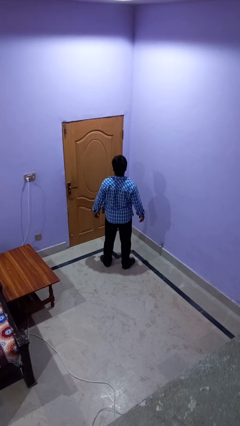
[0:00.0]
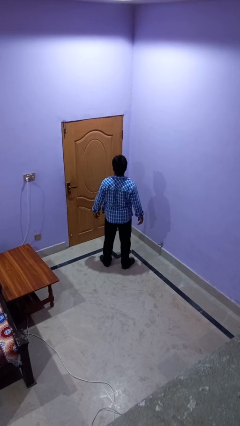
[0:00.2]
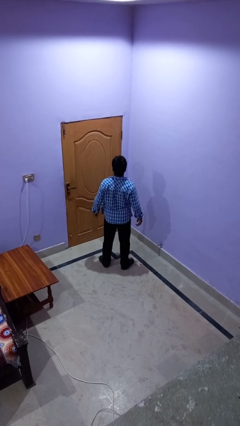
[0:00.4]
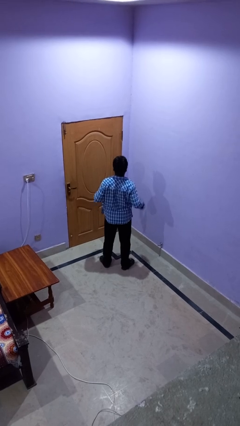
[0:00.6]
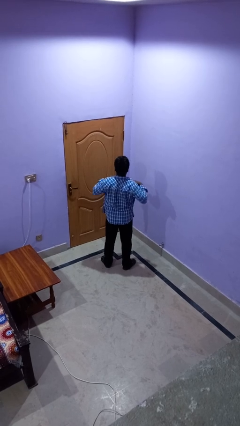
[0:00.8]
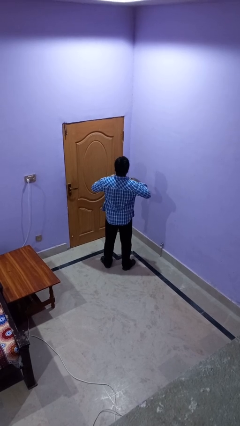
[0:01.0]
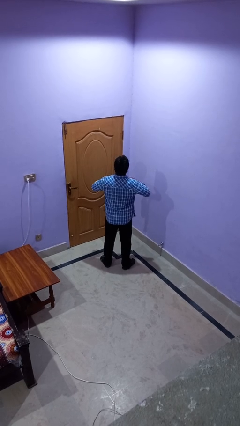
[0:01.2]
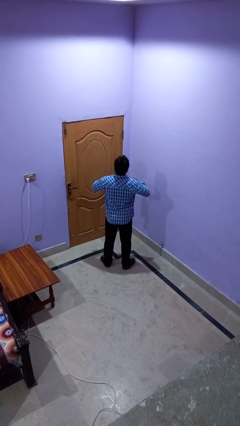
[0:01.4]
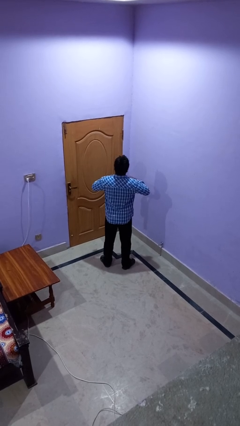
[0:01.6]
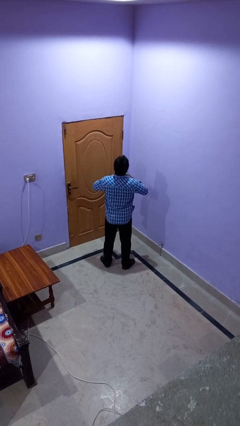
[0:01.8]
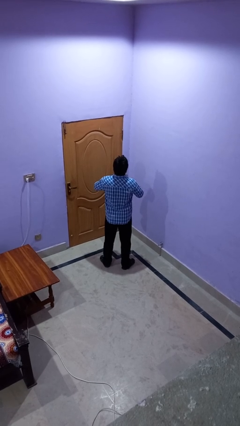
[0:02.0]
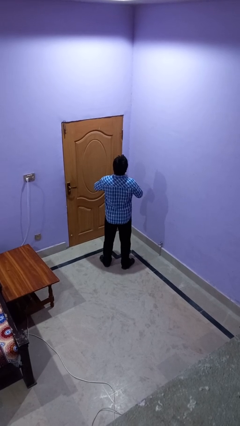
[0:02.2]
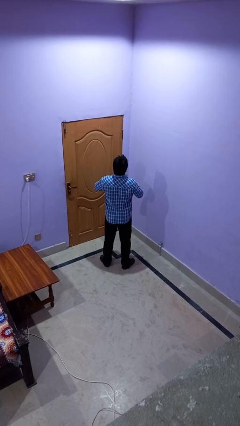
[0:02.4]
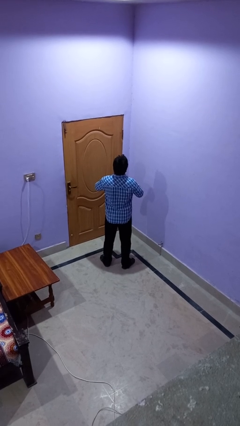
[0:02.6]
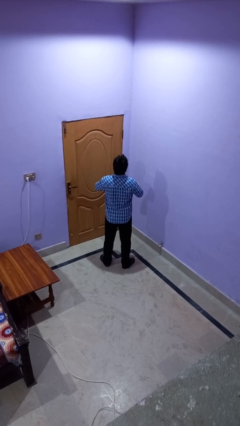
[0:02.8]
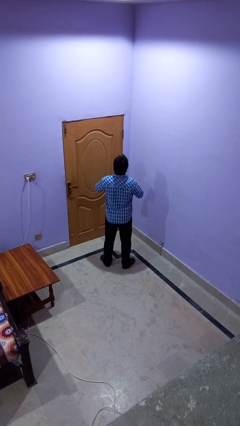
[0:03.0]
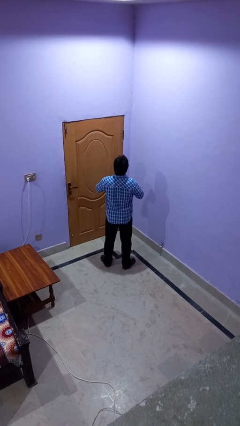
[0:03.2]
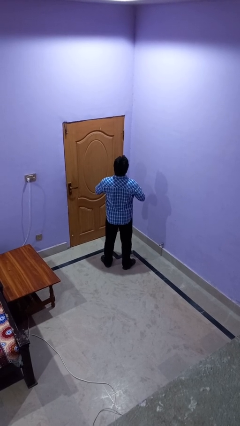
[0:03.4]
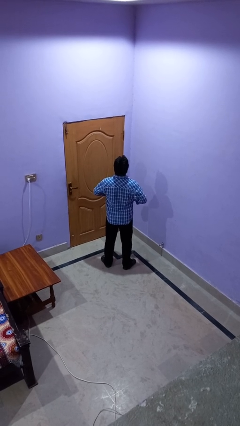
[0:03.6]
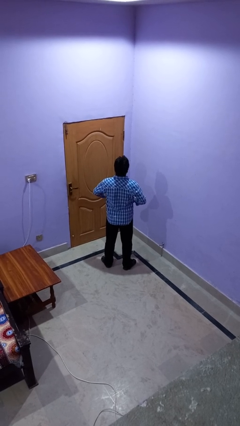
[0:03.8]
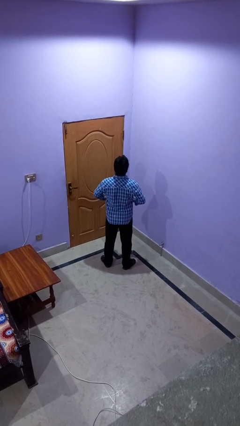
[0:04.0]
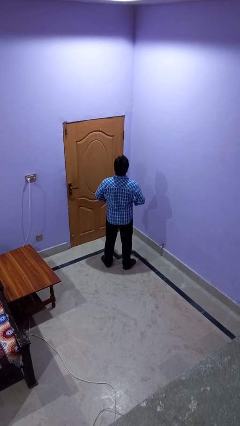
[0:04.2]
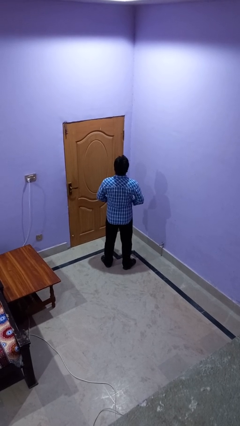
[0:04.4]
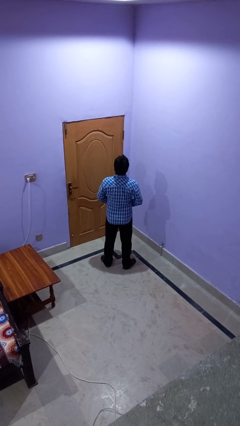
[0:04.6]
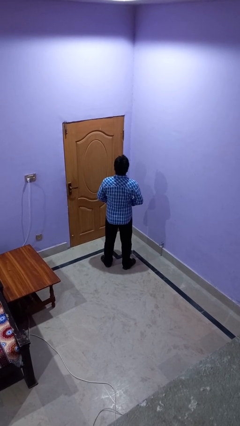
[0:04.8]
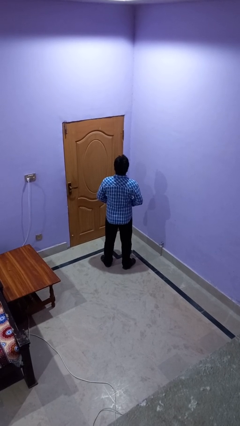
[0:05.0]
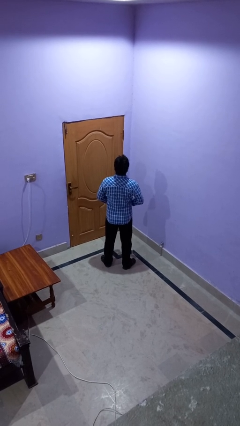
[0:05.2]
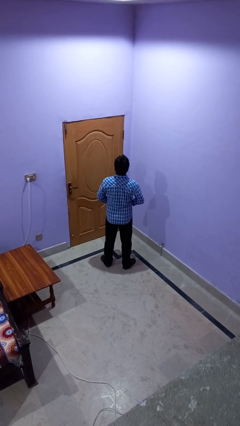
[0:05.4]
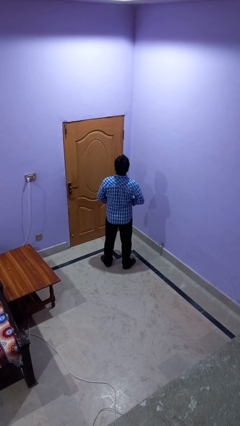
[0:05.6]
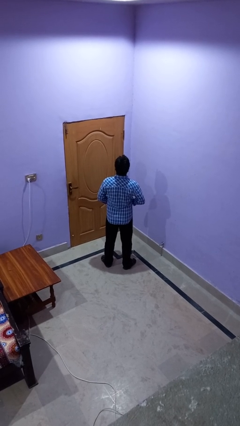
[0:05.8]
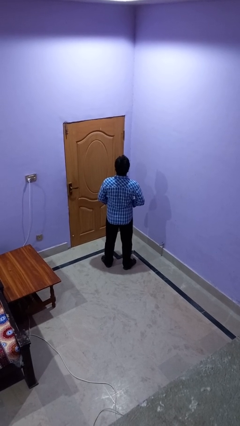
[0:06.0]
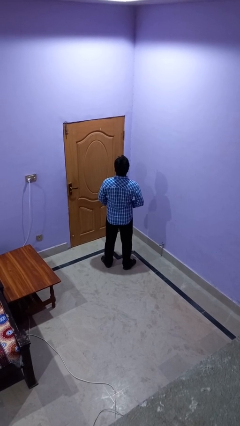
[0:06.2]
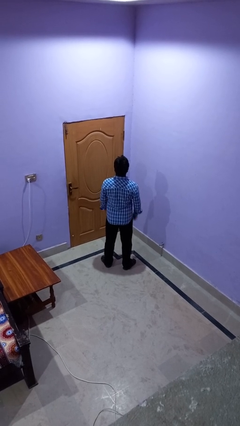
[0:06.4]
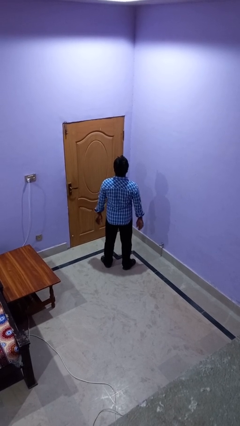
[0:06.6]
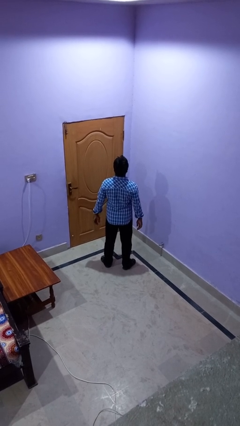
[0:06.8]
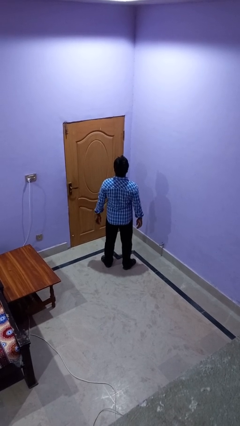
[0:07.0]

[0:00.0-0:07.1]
person buttons shirt

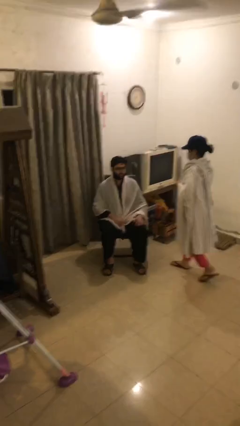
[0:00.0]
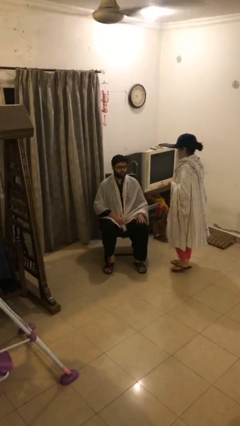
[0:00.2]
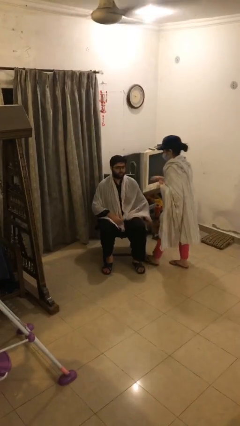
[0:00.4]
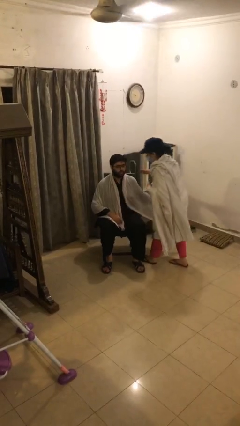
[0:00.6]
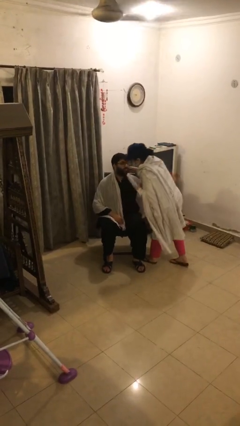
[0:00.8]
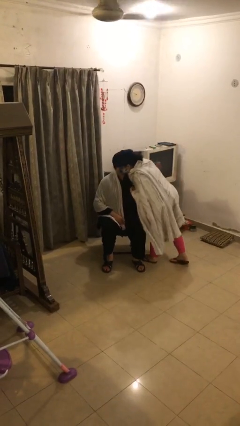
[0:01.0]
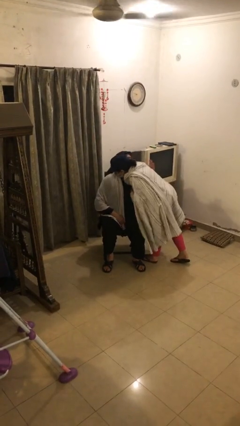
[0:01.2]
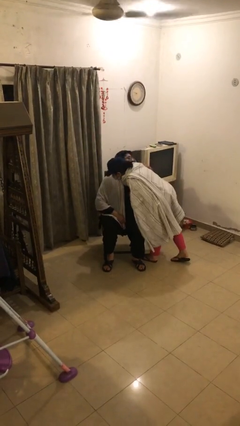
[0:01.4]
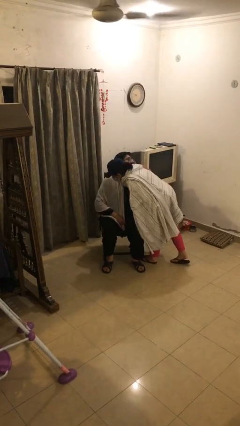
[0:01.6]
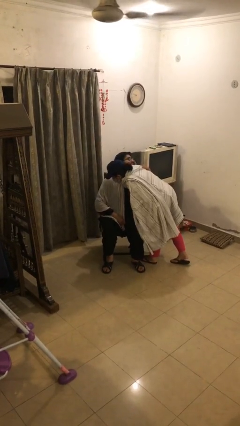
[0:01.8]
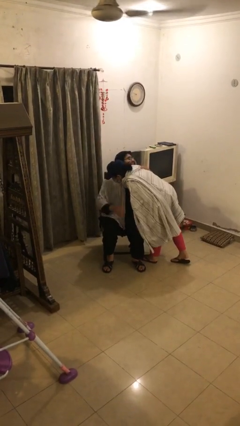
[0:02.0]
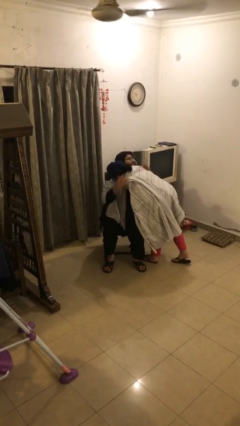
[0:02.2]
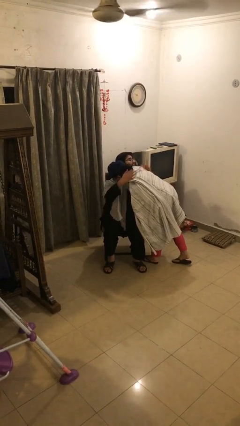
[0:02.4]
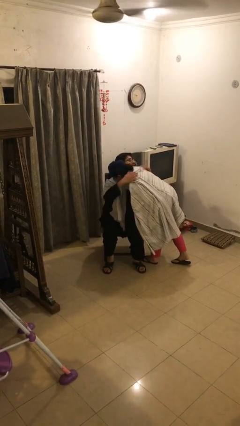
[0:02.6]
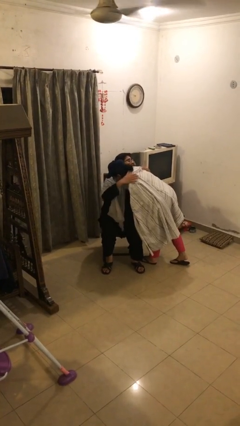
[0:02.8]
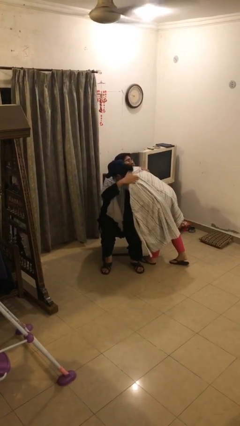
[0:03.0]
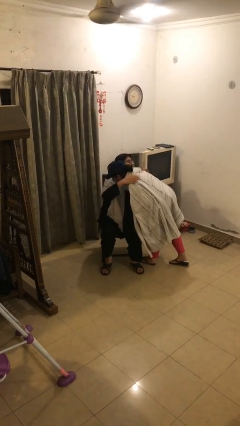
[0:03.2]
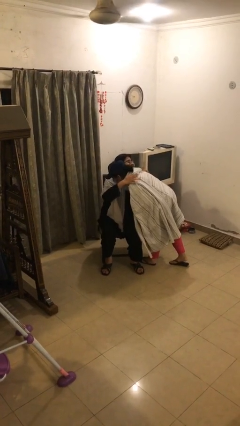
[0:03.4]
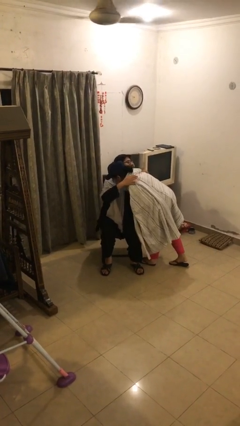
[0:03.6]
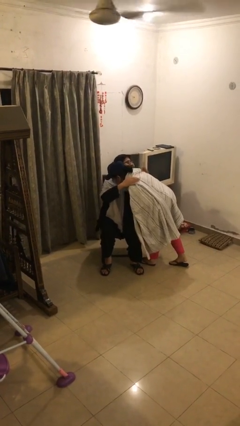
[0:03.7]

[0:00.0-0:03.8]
person embraces person

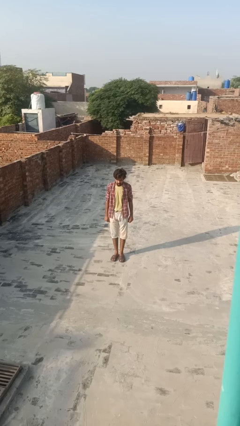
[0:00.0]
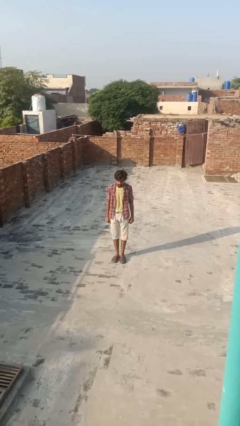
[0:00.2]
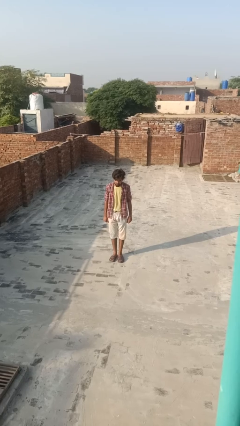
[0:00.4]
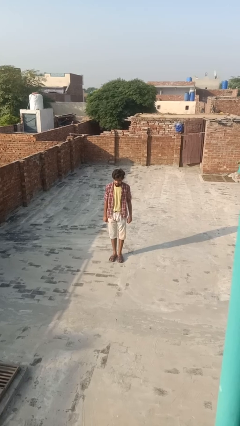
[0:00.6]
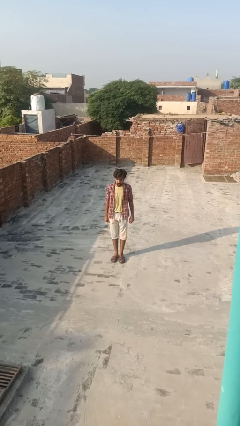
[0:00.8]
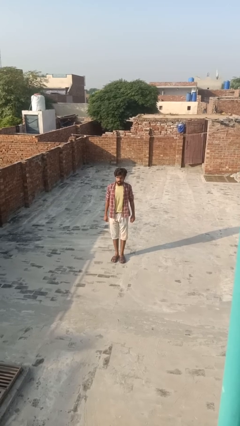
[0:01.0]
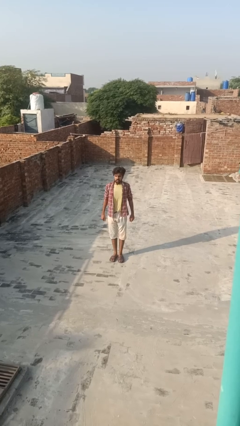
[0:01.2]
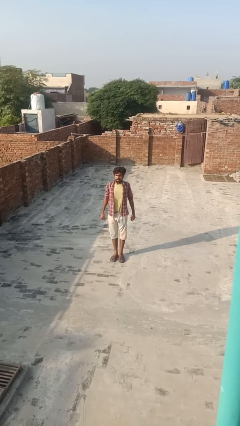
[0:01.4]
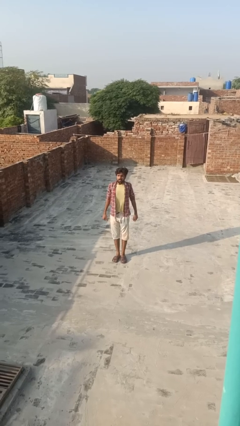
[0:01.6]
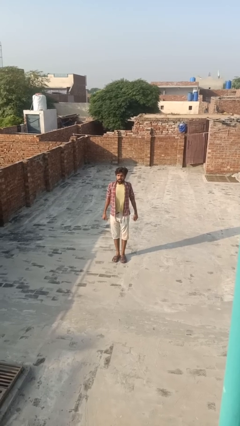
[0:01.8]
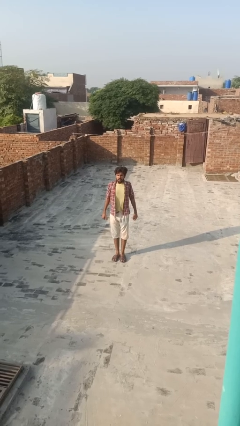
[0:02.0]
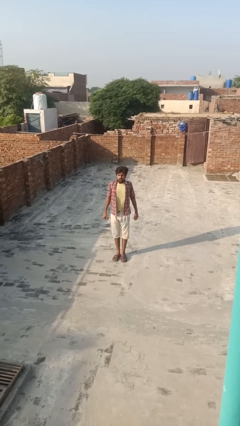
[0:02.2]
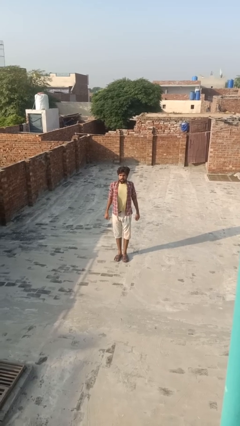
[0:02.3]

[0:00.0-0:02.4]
person exercises with lunges

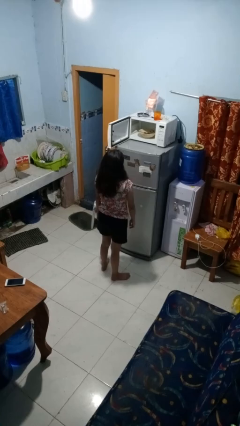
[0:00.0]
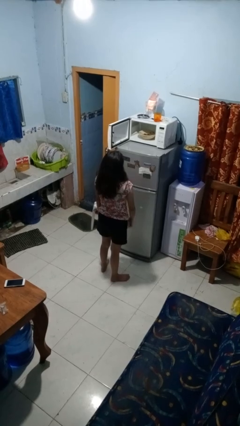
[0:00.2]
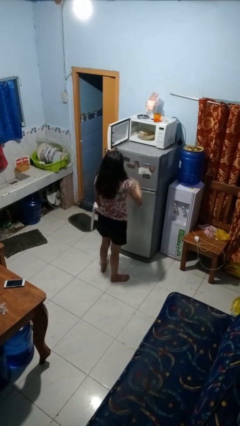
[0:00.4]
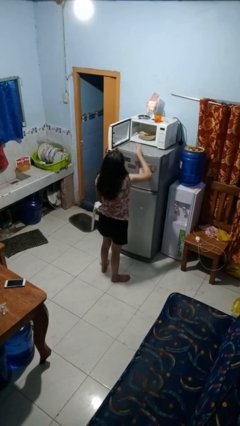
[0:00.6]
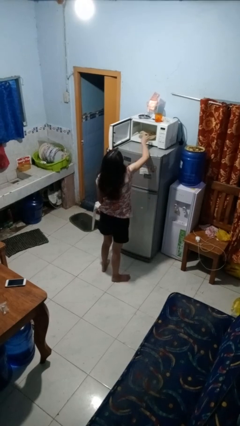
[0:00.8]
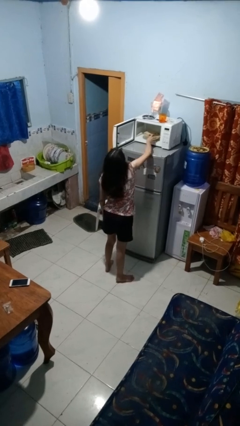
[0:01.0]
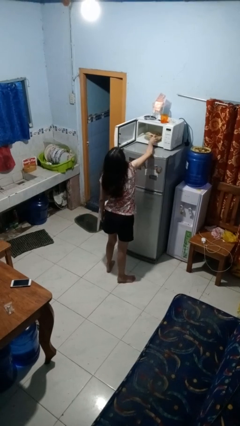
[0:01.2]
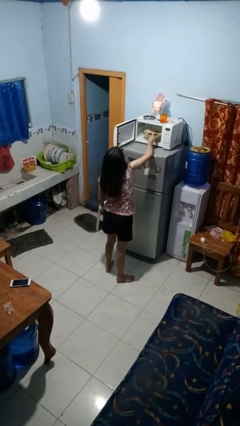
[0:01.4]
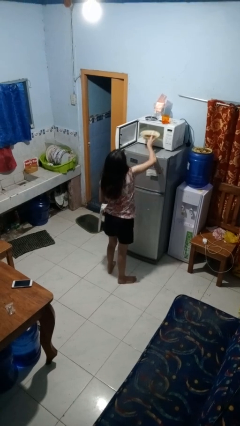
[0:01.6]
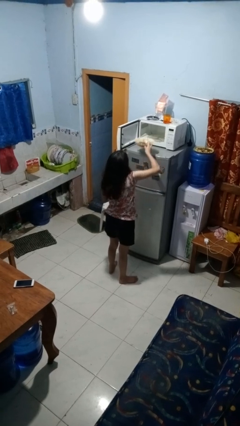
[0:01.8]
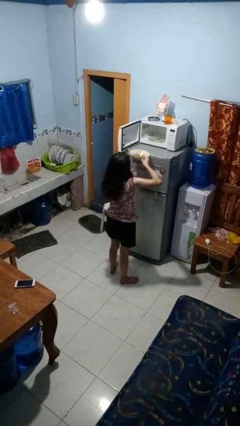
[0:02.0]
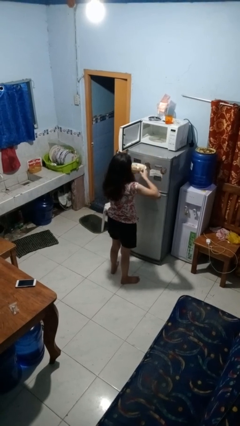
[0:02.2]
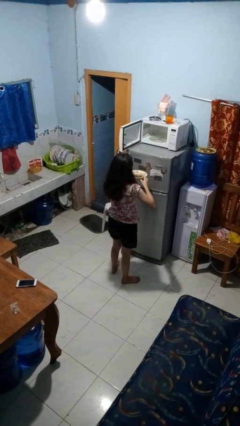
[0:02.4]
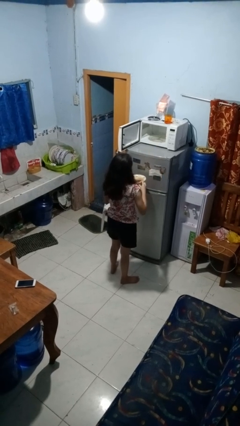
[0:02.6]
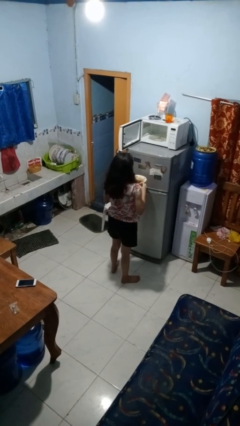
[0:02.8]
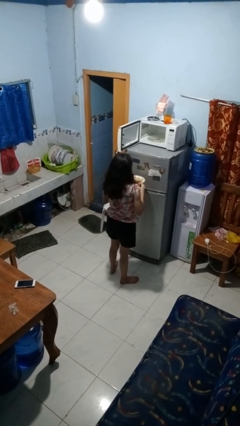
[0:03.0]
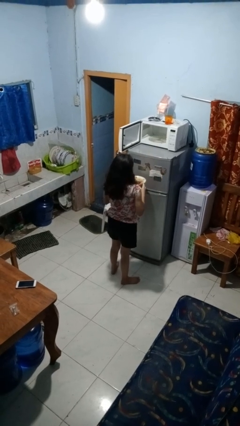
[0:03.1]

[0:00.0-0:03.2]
person takes object from microwave

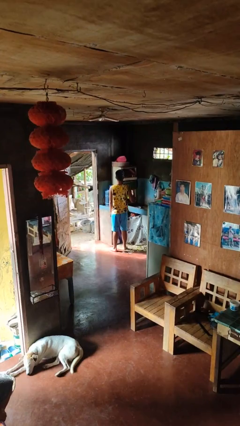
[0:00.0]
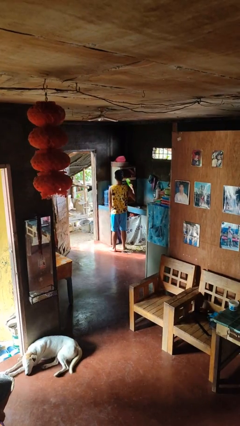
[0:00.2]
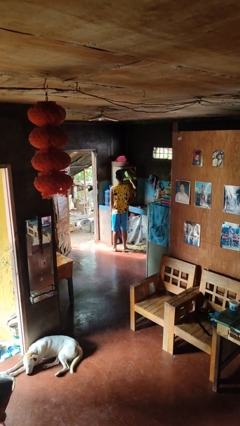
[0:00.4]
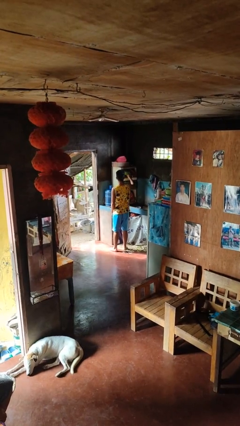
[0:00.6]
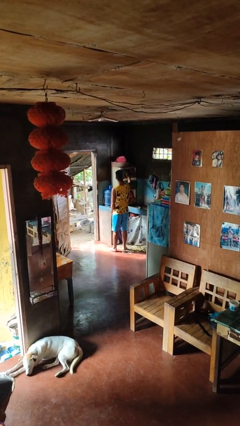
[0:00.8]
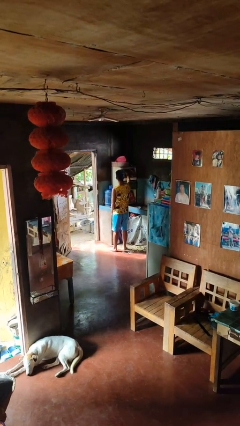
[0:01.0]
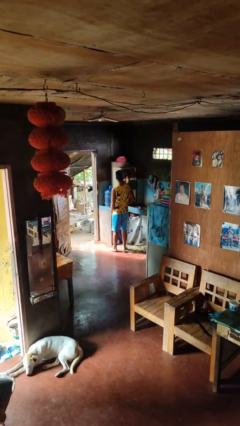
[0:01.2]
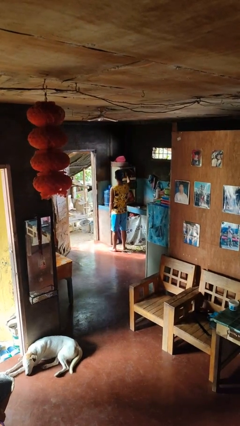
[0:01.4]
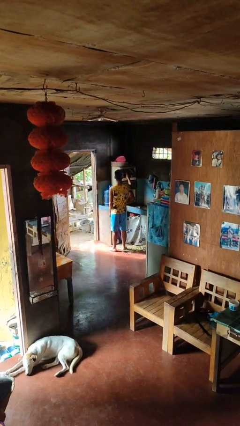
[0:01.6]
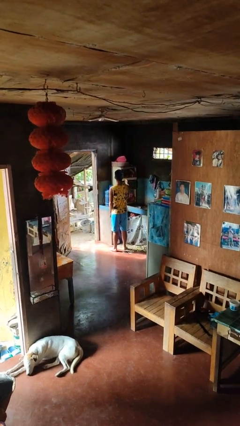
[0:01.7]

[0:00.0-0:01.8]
person puts object in cabinet
